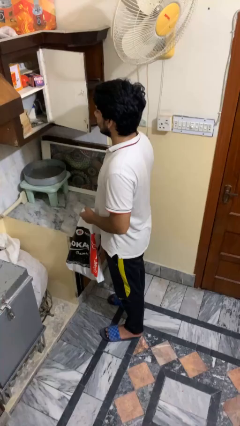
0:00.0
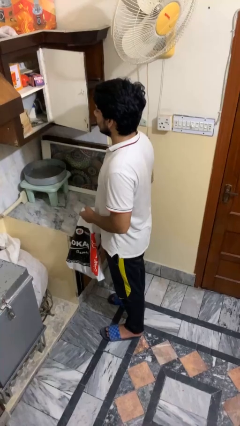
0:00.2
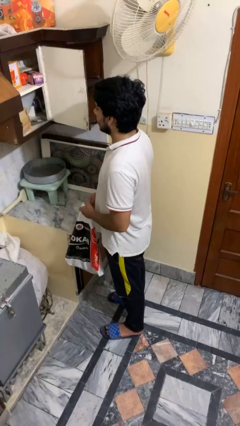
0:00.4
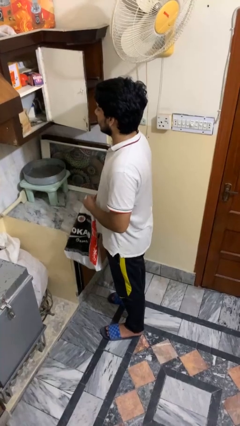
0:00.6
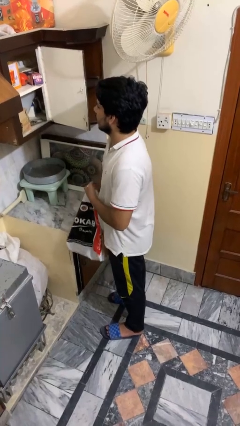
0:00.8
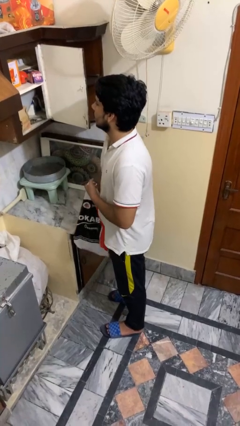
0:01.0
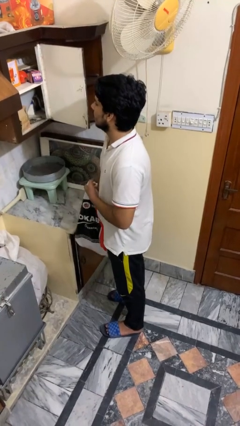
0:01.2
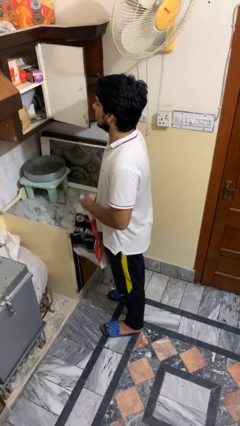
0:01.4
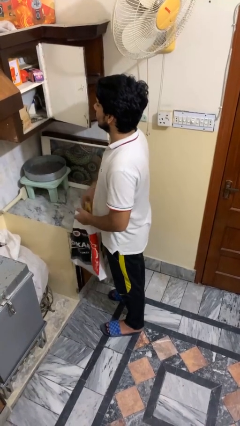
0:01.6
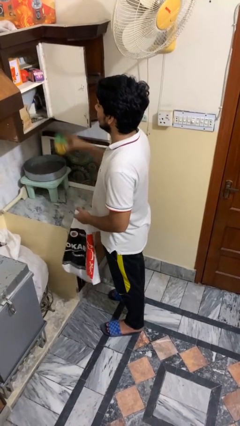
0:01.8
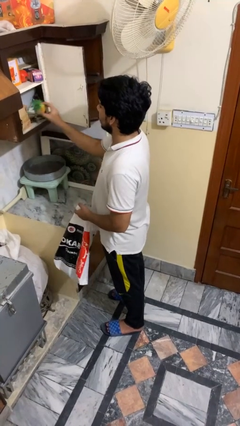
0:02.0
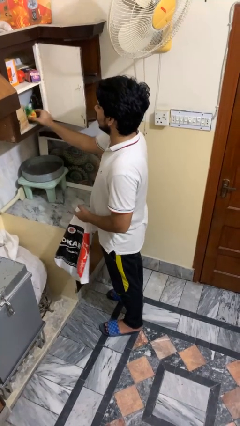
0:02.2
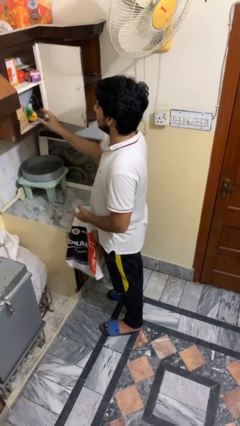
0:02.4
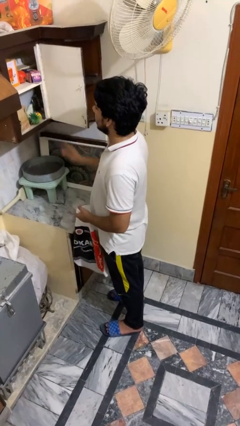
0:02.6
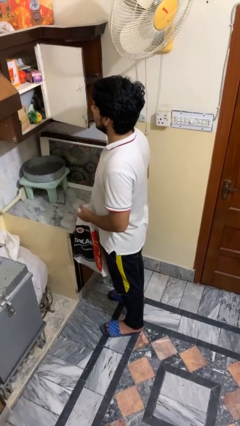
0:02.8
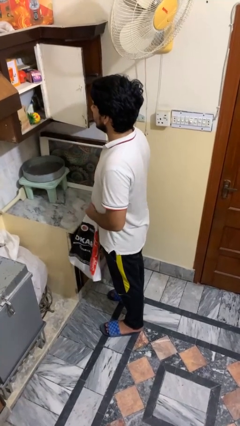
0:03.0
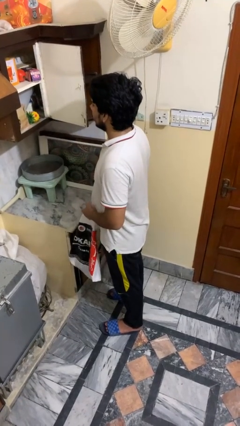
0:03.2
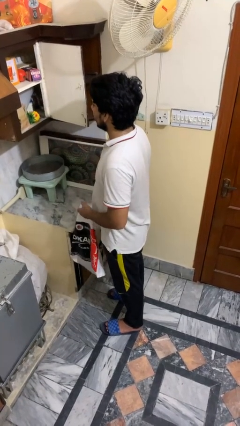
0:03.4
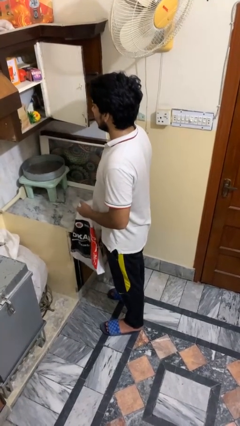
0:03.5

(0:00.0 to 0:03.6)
person loads groceries into cabinet

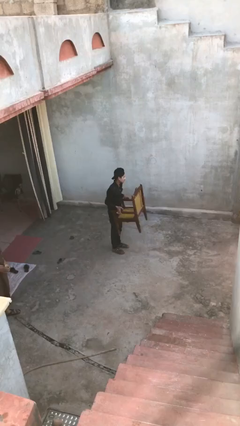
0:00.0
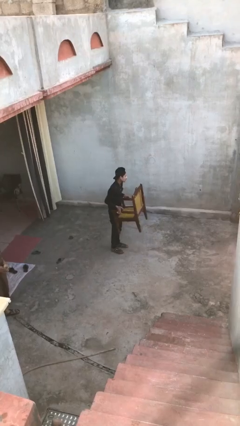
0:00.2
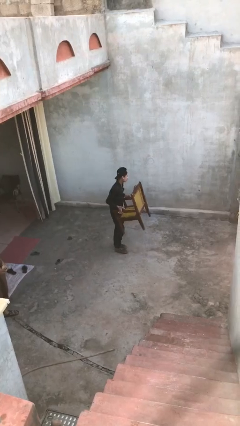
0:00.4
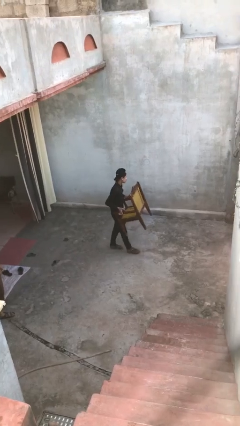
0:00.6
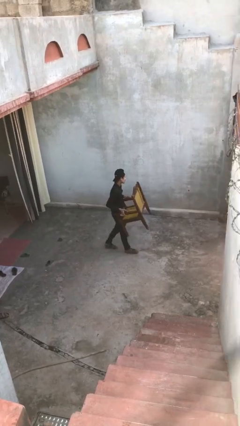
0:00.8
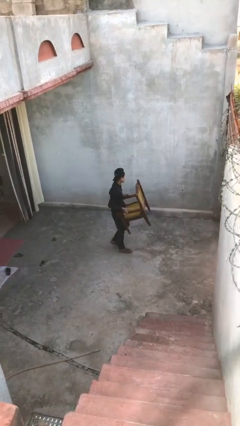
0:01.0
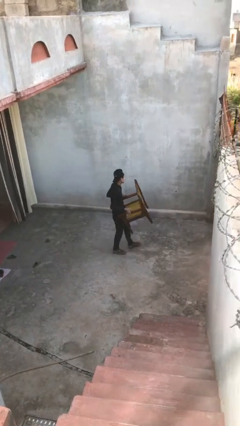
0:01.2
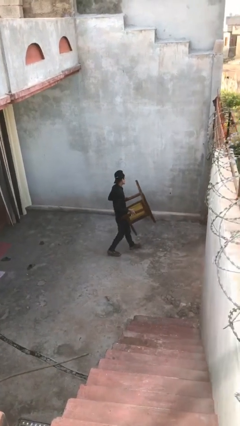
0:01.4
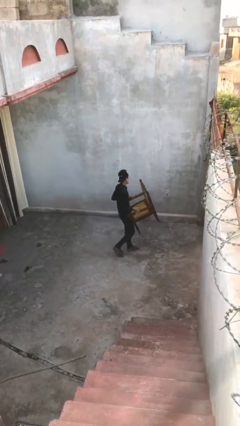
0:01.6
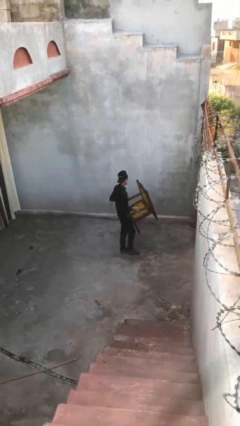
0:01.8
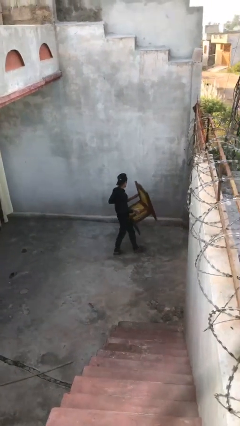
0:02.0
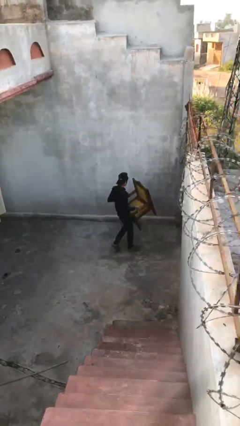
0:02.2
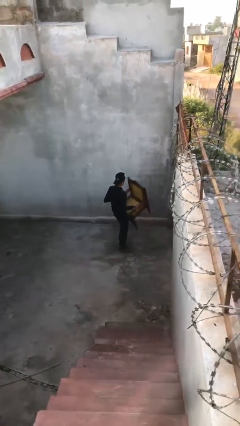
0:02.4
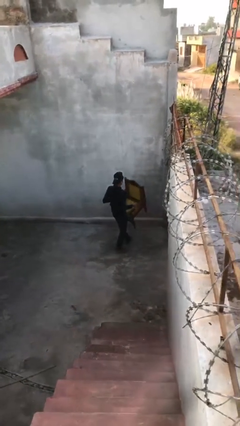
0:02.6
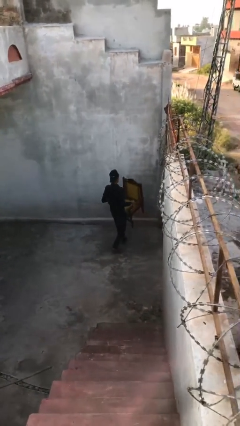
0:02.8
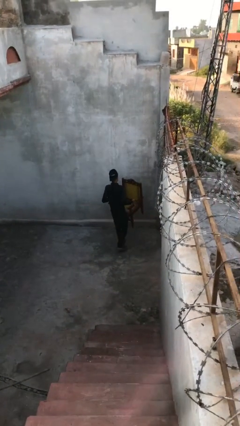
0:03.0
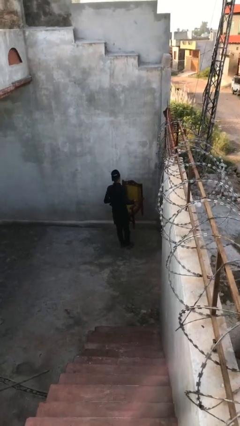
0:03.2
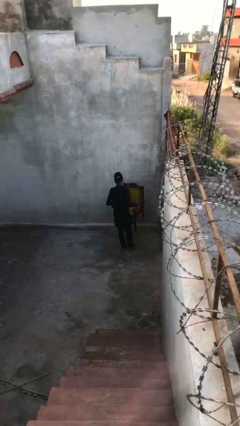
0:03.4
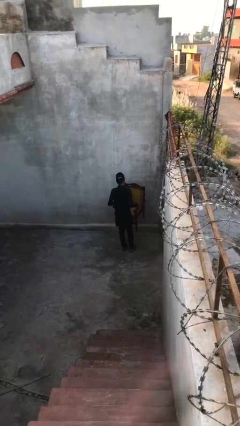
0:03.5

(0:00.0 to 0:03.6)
person carries heavy object

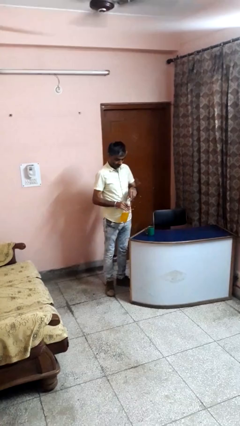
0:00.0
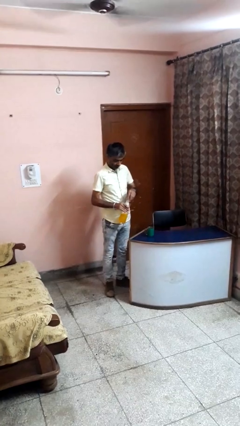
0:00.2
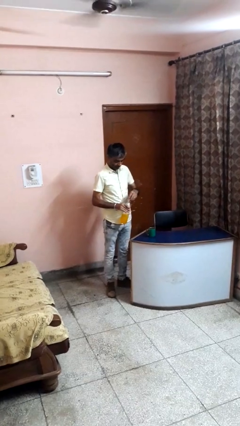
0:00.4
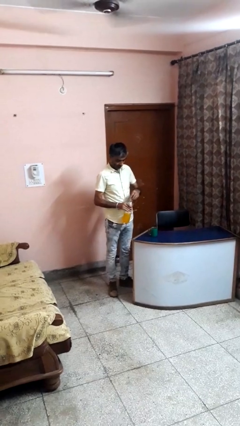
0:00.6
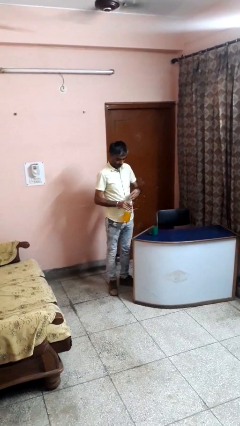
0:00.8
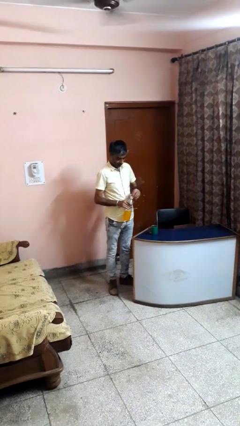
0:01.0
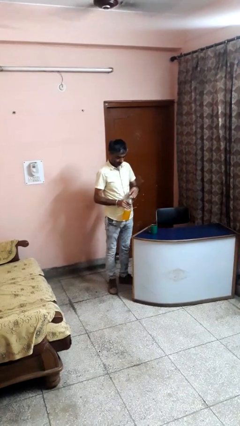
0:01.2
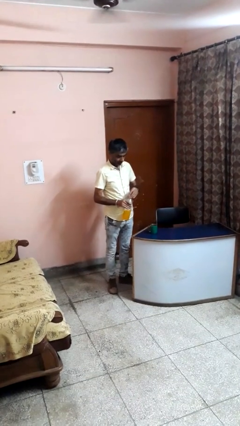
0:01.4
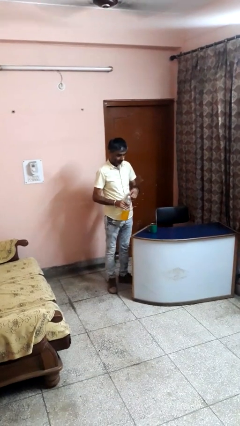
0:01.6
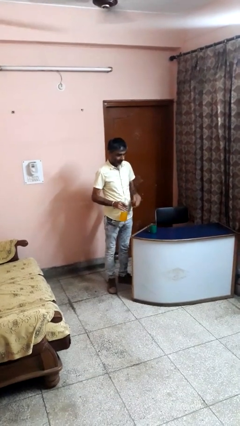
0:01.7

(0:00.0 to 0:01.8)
person screws lid to bottle

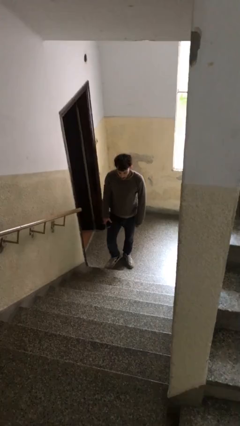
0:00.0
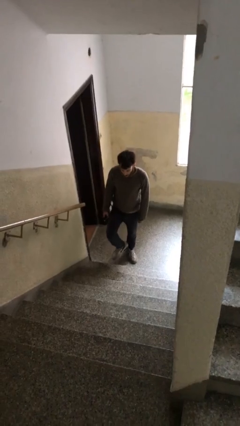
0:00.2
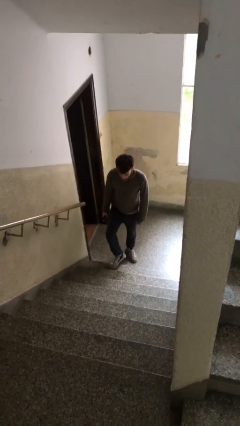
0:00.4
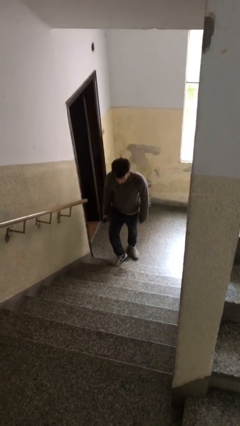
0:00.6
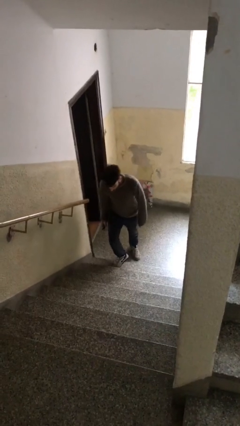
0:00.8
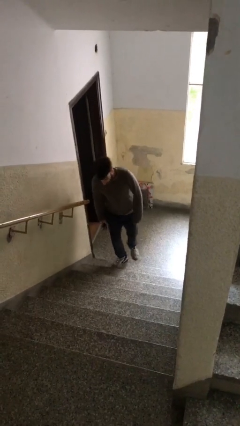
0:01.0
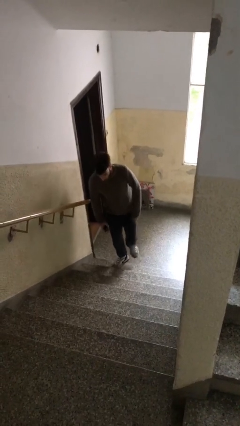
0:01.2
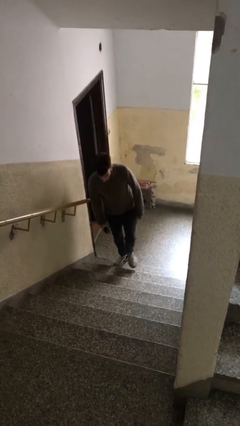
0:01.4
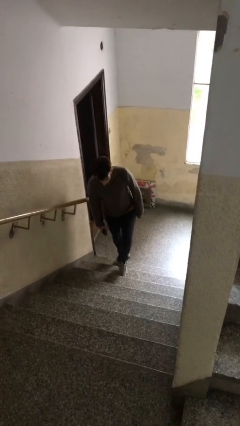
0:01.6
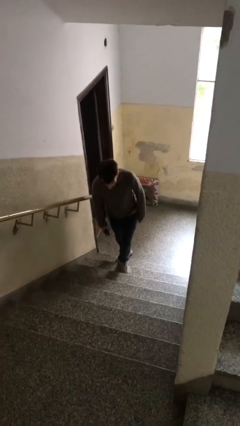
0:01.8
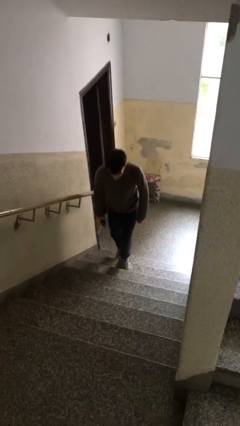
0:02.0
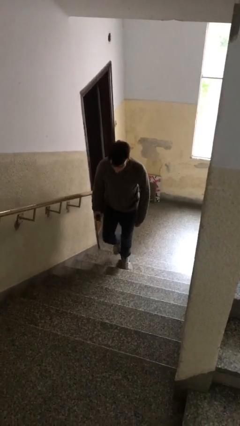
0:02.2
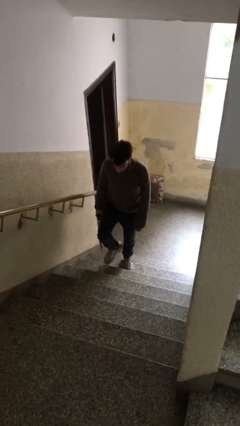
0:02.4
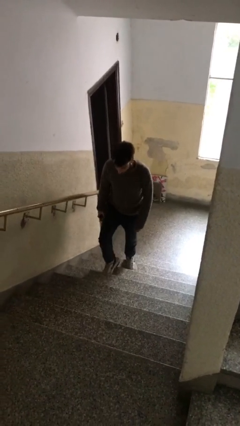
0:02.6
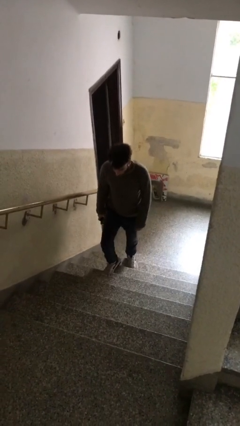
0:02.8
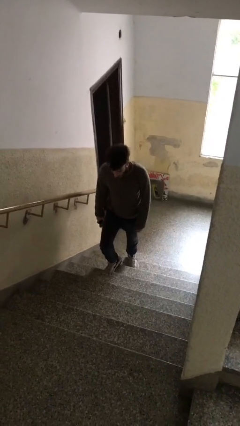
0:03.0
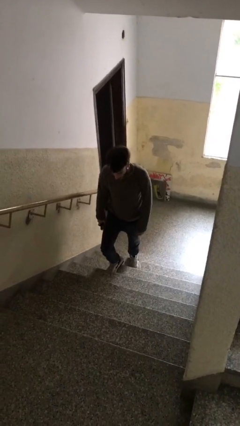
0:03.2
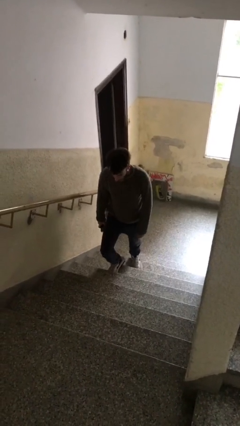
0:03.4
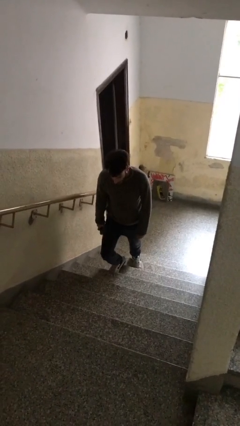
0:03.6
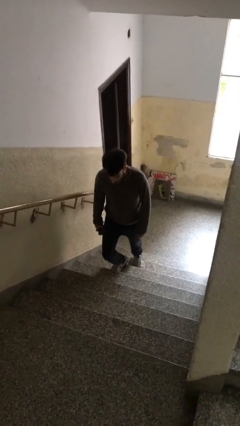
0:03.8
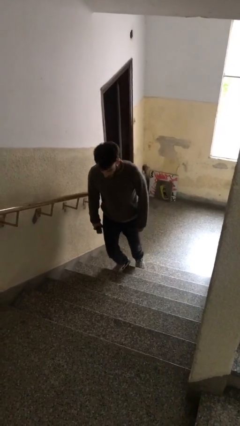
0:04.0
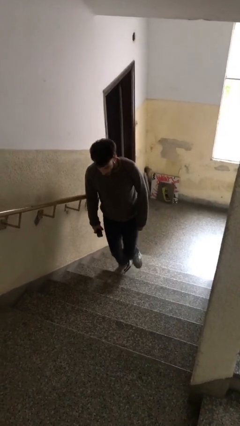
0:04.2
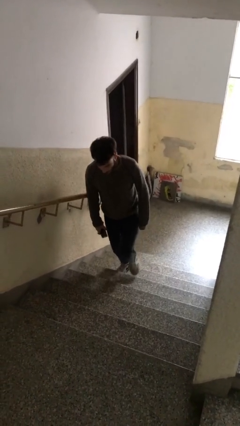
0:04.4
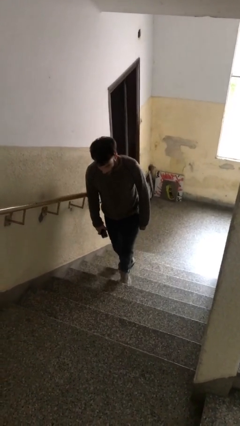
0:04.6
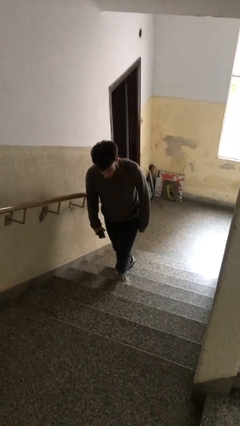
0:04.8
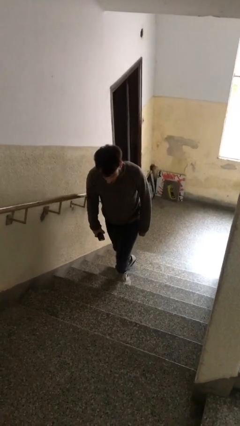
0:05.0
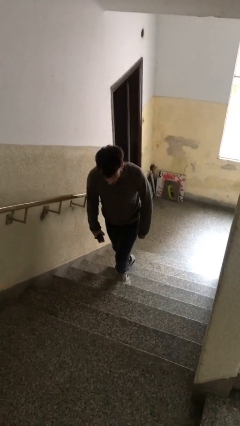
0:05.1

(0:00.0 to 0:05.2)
person climbs up stairs

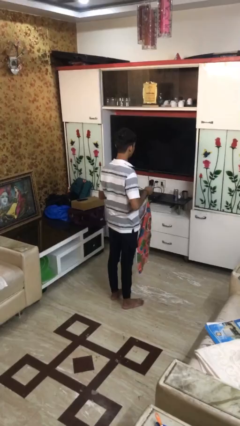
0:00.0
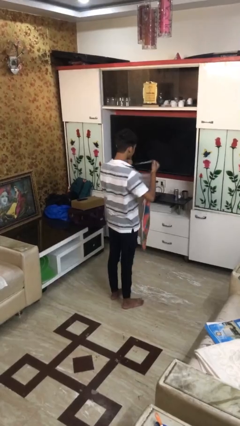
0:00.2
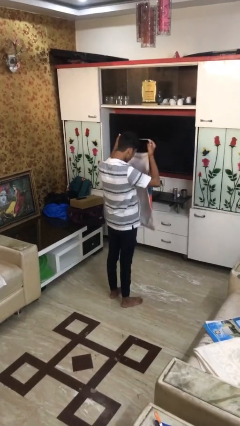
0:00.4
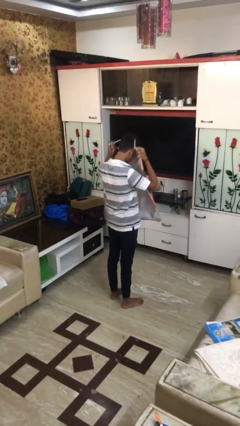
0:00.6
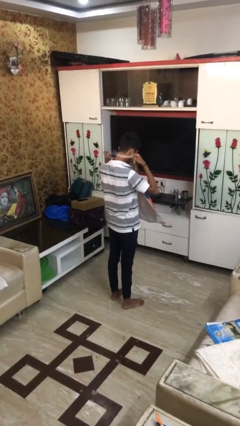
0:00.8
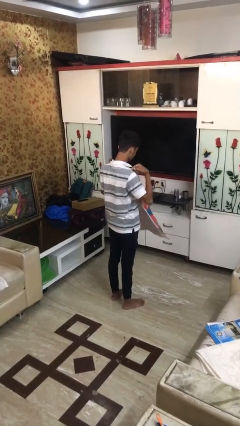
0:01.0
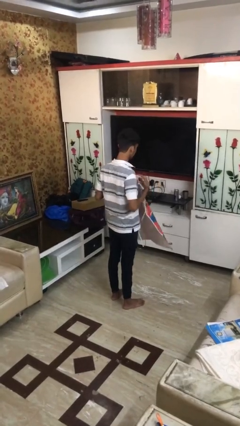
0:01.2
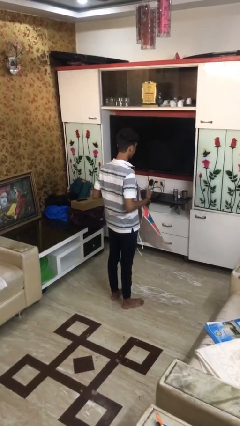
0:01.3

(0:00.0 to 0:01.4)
person puts on apron

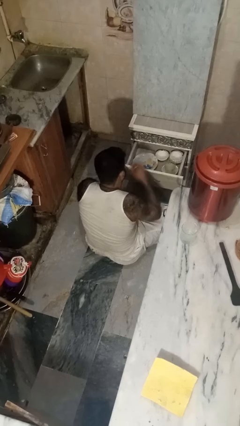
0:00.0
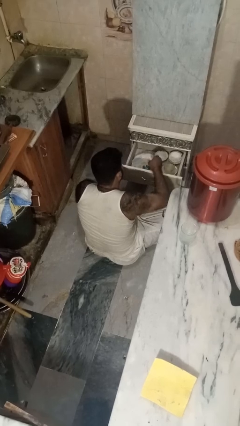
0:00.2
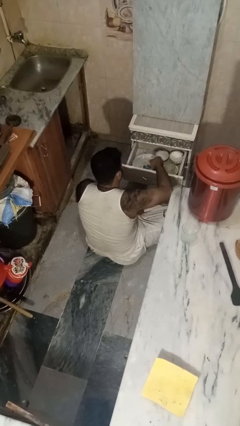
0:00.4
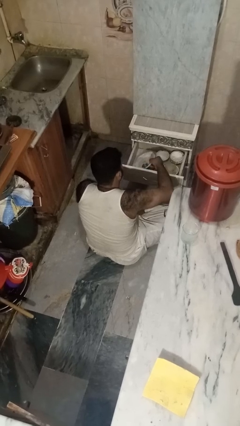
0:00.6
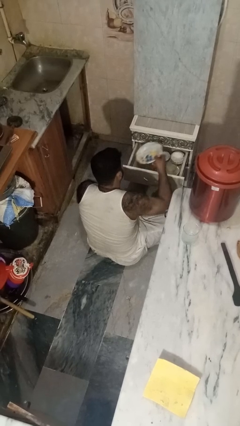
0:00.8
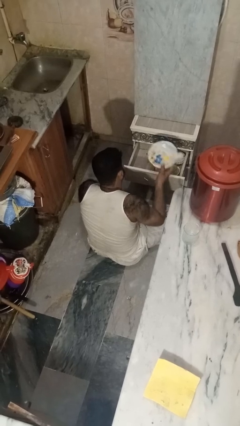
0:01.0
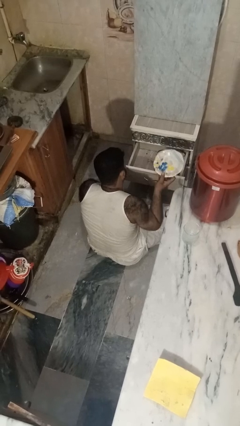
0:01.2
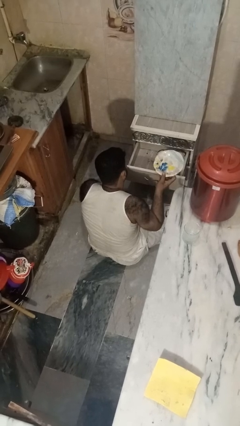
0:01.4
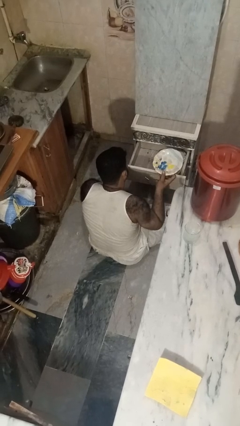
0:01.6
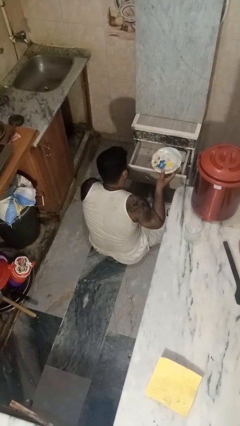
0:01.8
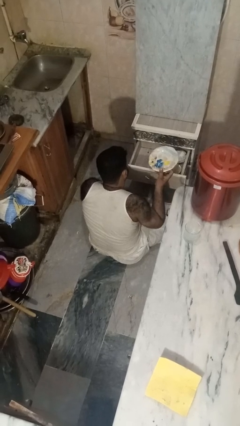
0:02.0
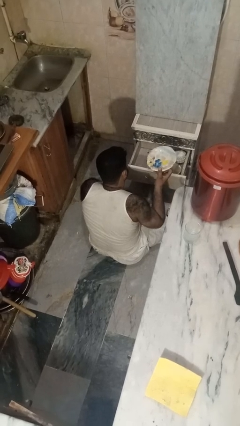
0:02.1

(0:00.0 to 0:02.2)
person takes object from kitchen drawer
